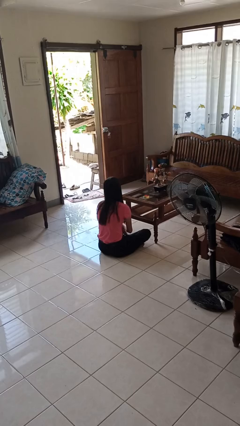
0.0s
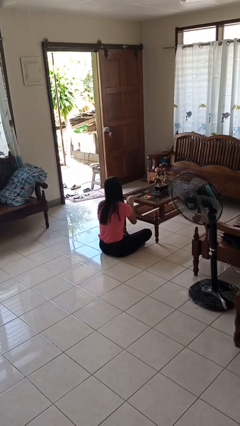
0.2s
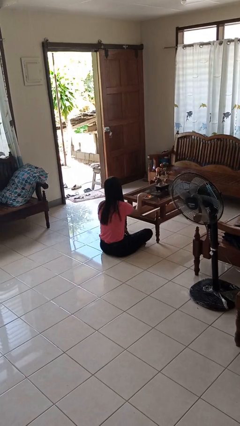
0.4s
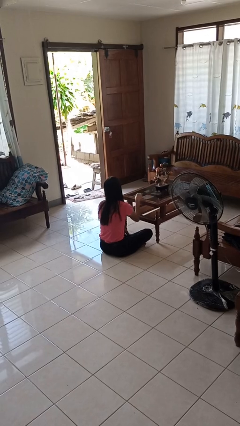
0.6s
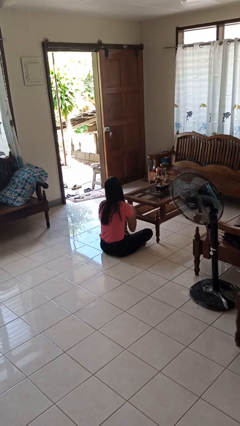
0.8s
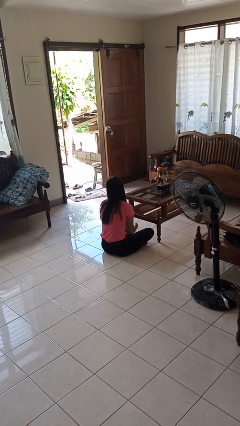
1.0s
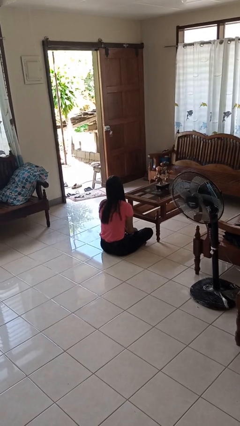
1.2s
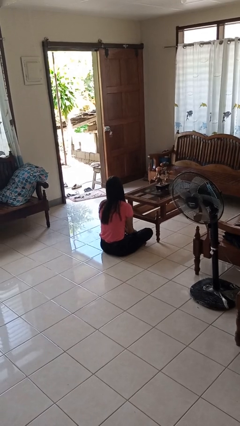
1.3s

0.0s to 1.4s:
person picks up object from table

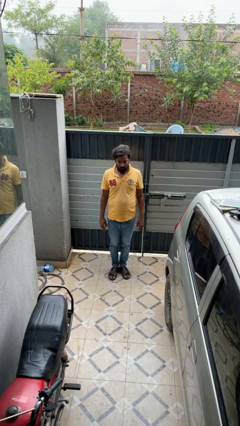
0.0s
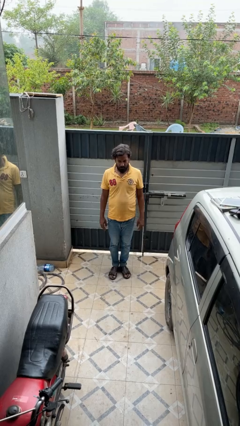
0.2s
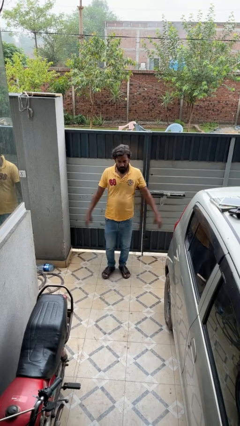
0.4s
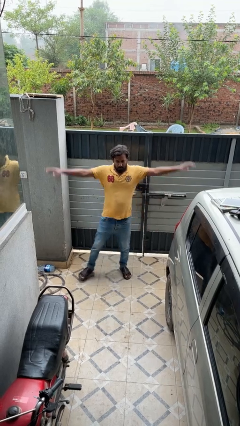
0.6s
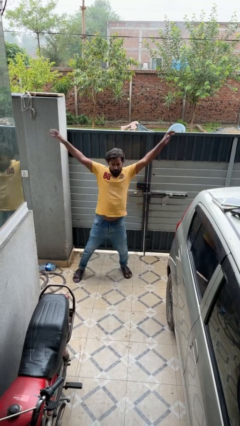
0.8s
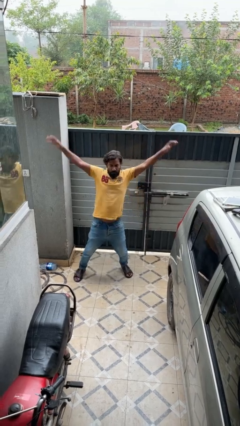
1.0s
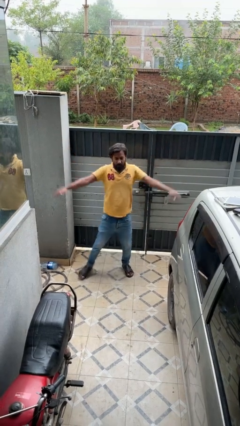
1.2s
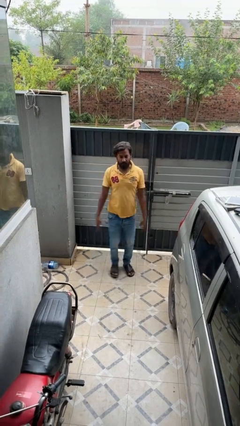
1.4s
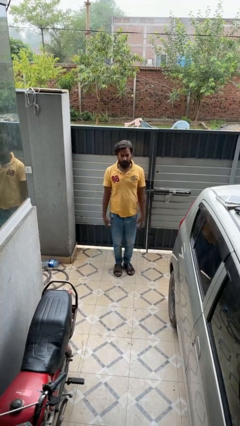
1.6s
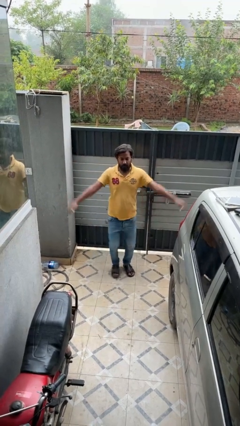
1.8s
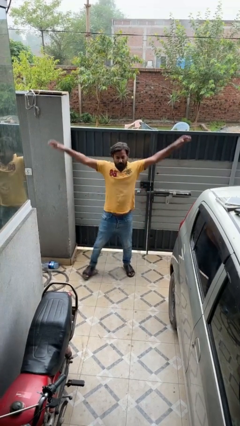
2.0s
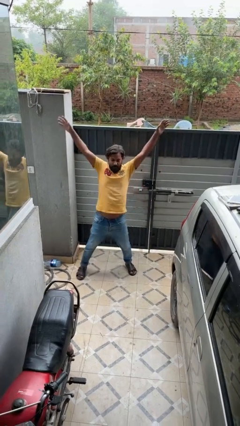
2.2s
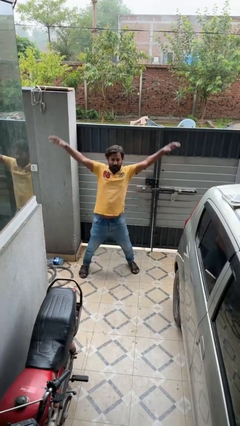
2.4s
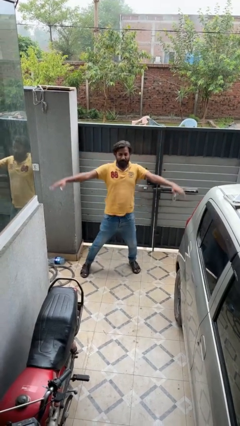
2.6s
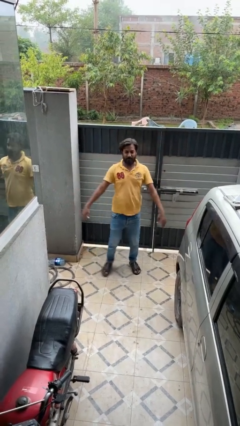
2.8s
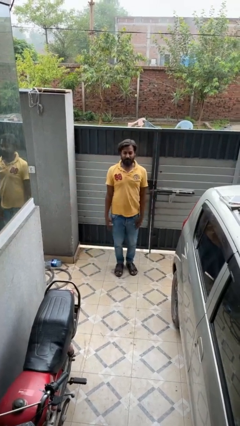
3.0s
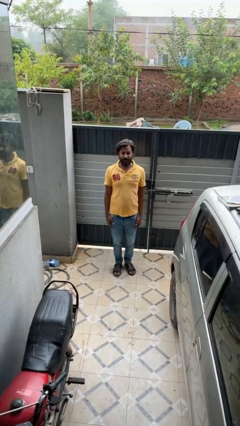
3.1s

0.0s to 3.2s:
person exercises with jumping jacks

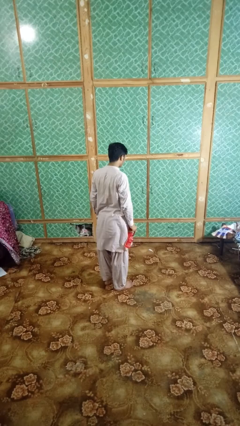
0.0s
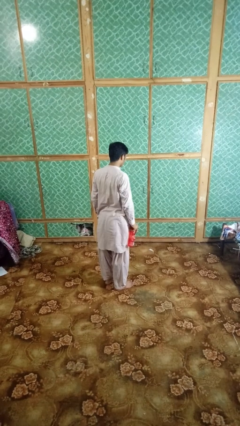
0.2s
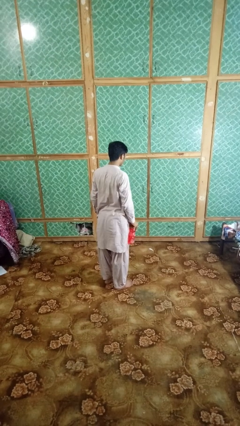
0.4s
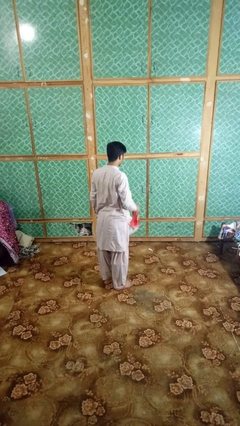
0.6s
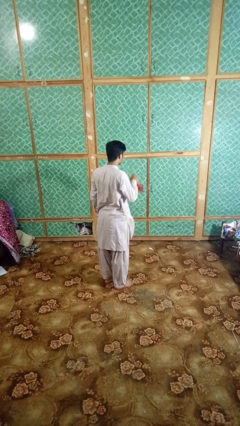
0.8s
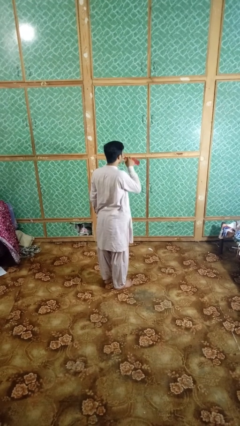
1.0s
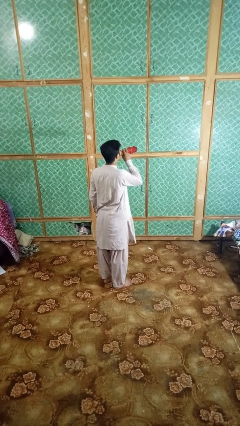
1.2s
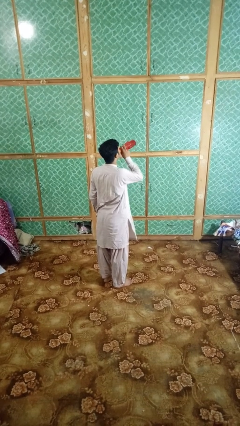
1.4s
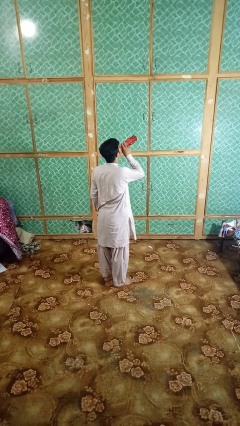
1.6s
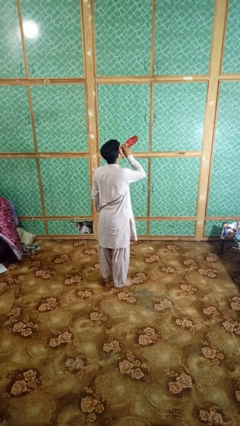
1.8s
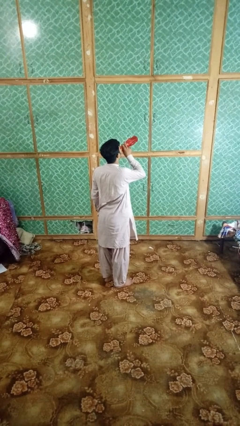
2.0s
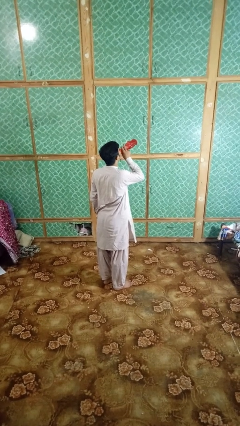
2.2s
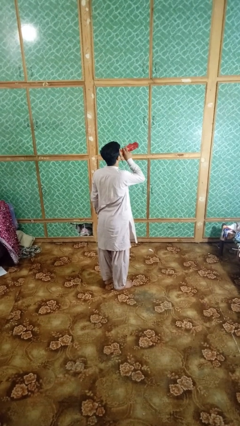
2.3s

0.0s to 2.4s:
person drinks from bottle

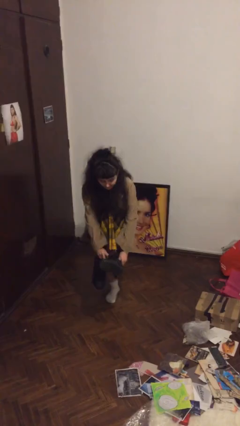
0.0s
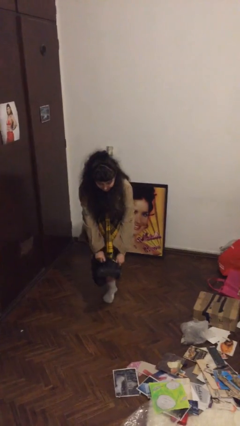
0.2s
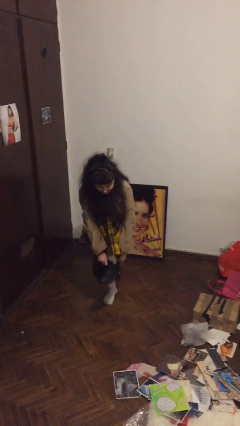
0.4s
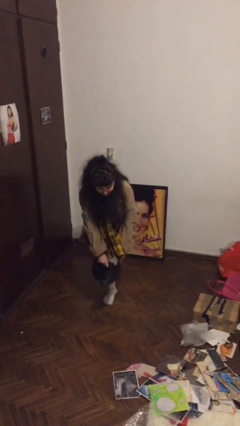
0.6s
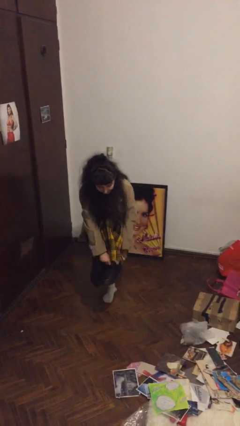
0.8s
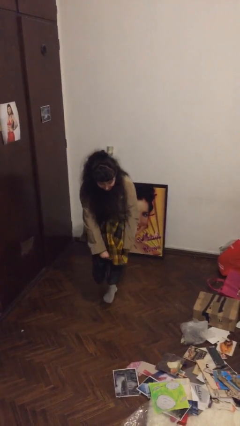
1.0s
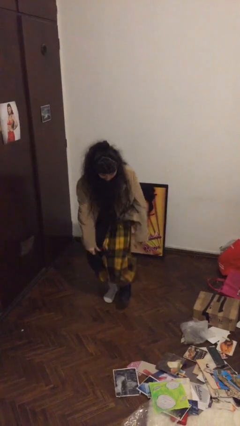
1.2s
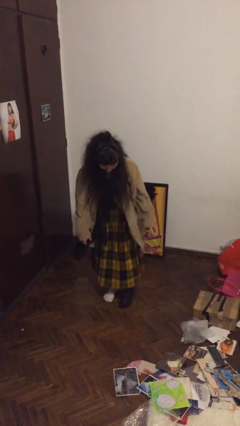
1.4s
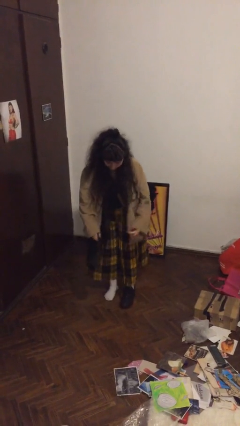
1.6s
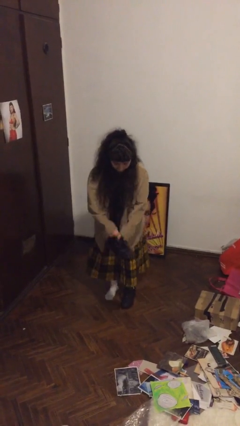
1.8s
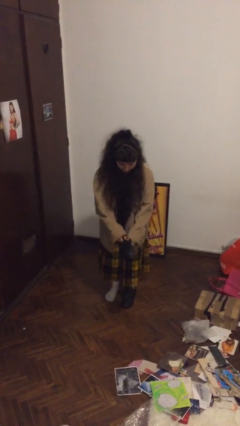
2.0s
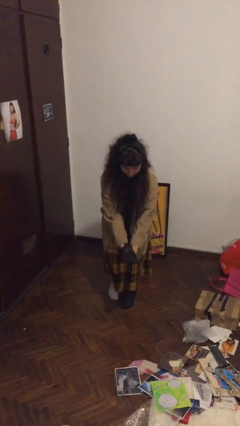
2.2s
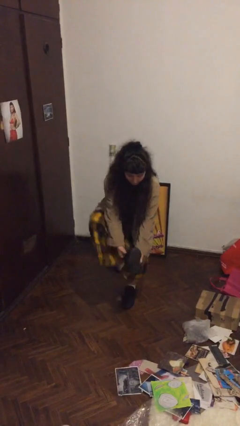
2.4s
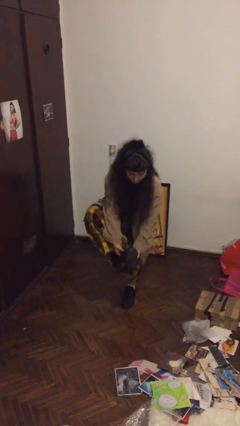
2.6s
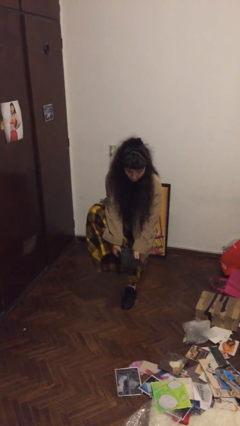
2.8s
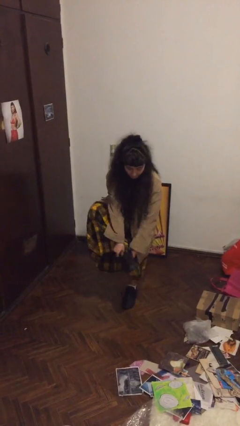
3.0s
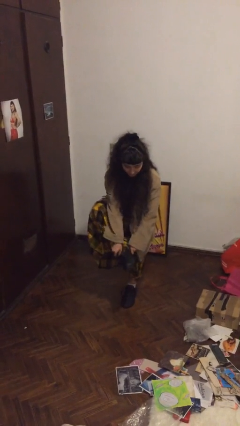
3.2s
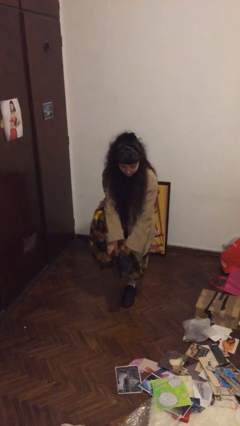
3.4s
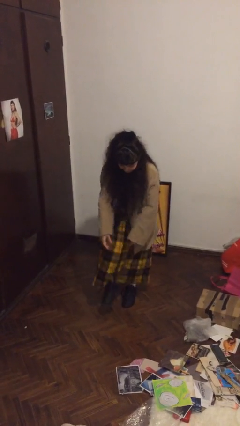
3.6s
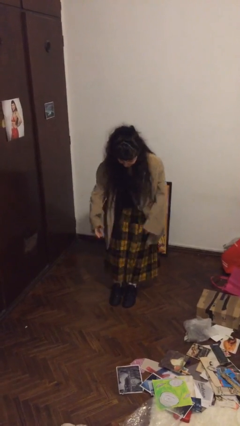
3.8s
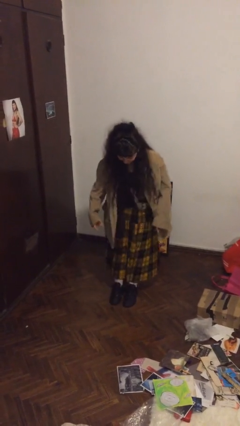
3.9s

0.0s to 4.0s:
person puts on shoes

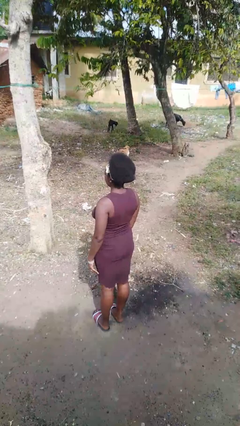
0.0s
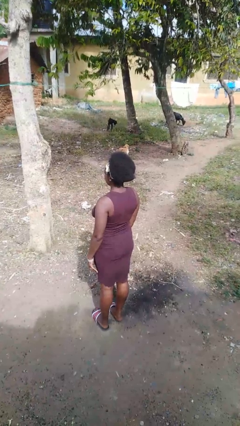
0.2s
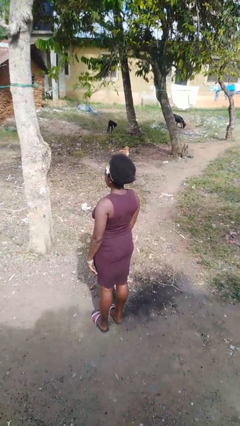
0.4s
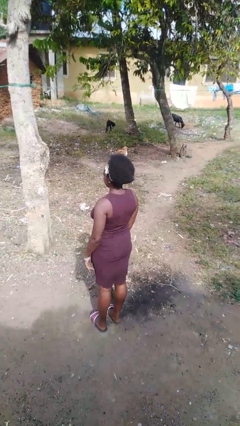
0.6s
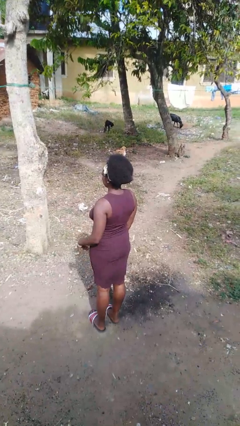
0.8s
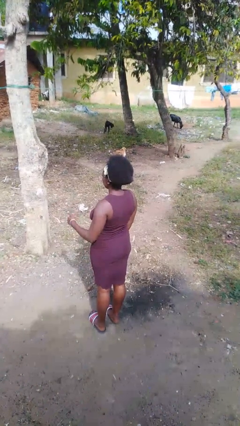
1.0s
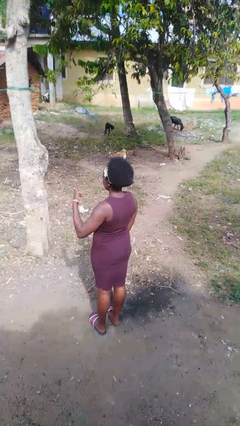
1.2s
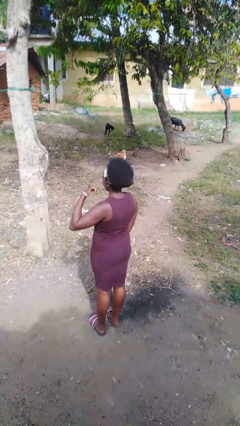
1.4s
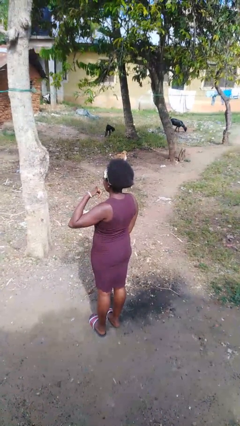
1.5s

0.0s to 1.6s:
person gestures call me

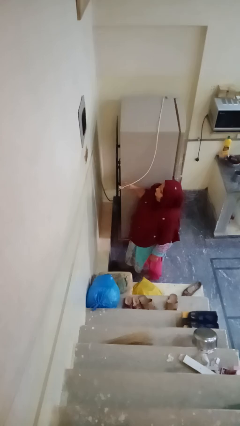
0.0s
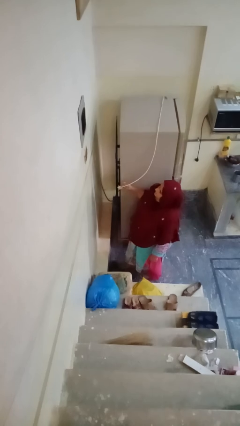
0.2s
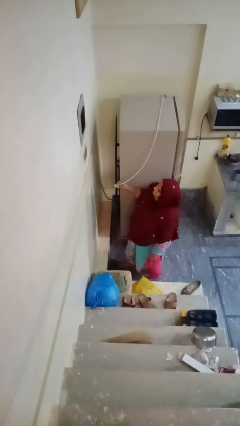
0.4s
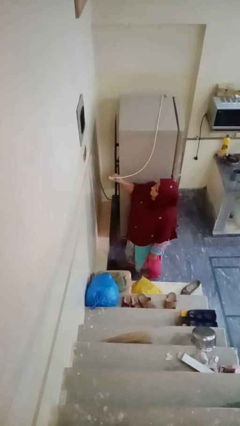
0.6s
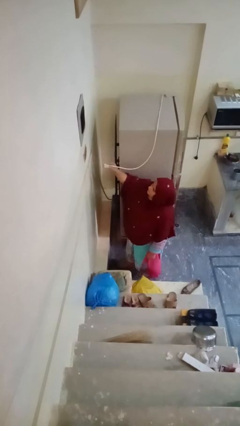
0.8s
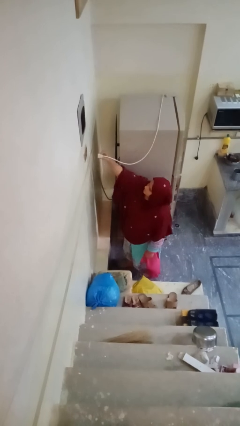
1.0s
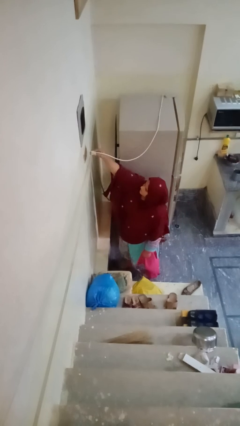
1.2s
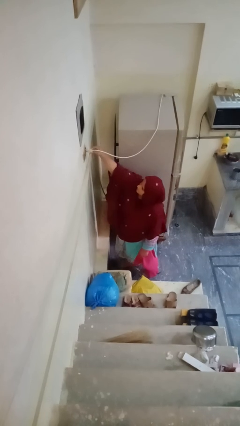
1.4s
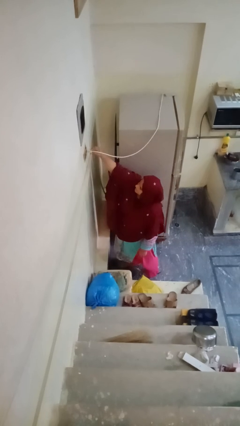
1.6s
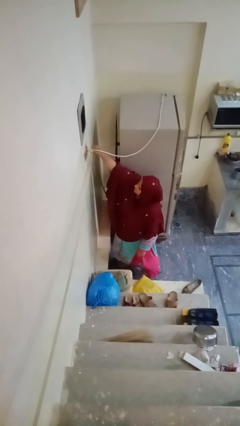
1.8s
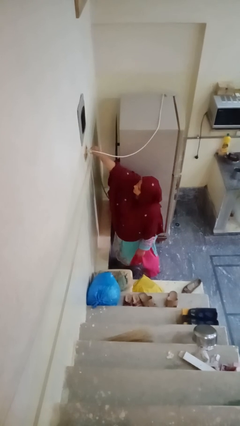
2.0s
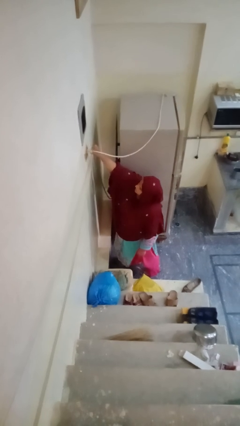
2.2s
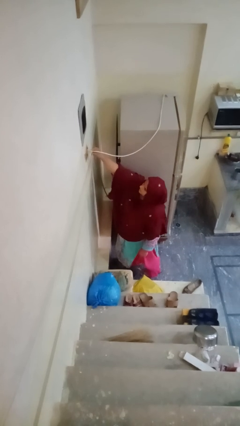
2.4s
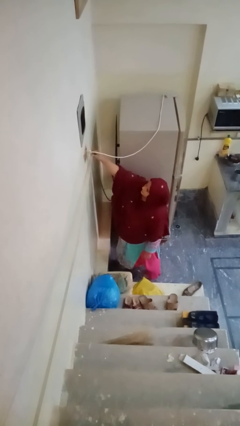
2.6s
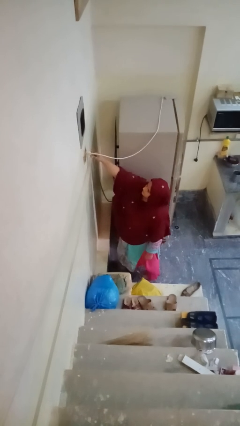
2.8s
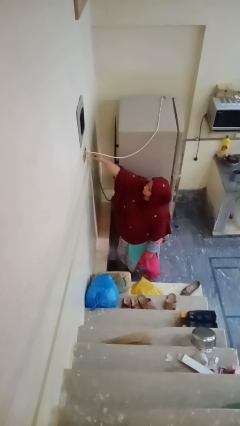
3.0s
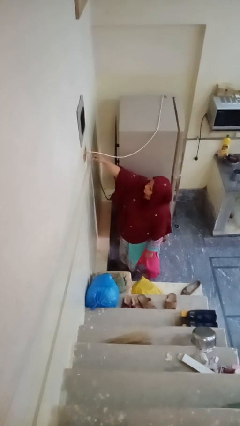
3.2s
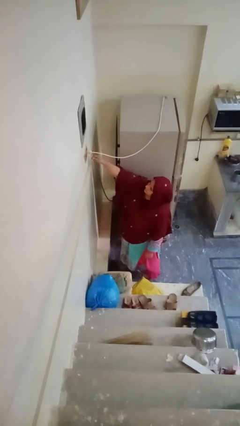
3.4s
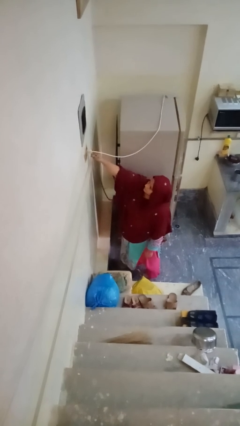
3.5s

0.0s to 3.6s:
person plugs into electrical socket

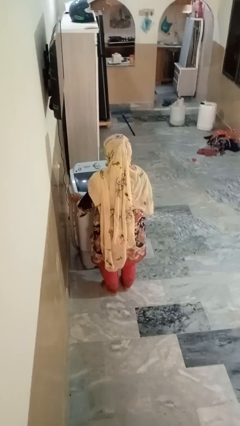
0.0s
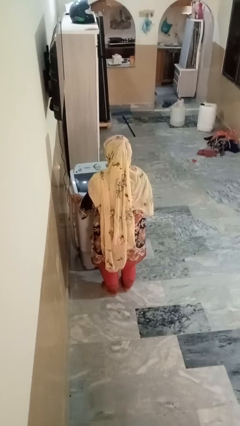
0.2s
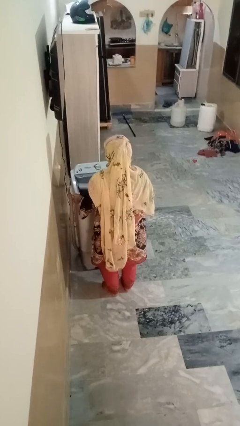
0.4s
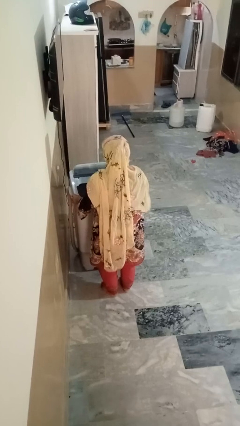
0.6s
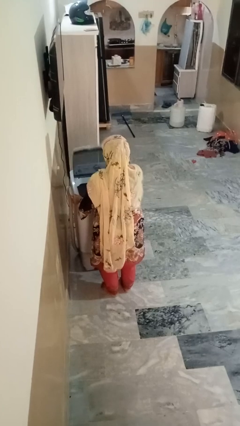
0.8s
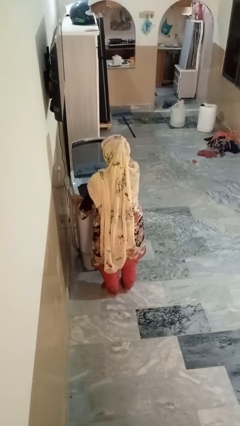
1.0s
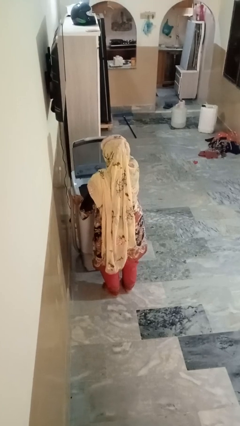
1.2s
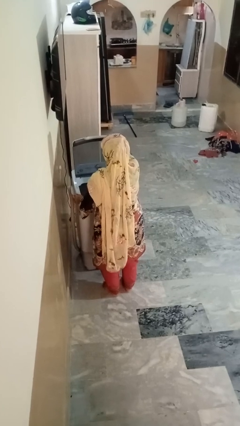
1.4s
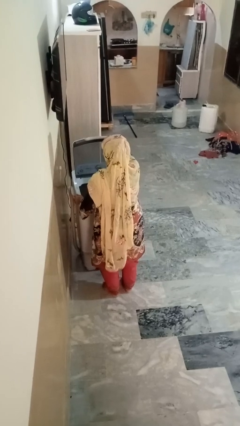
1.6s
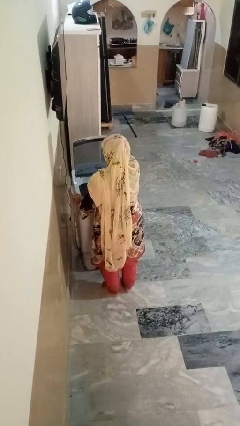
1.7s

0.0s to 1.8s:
person opens clothes washer
